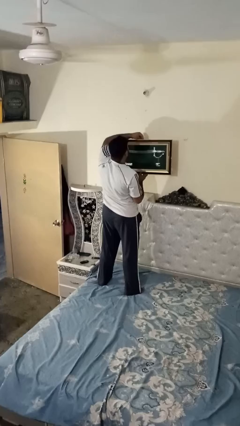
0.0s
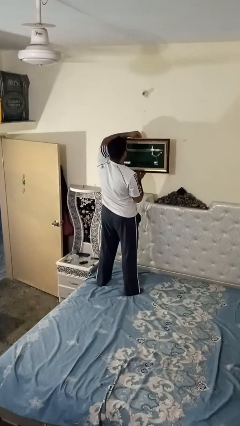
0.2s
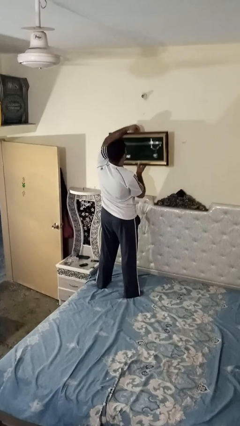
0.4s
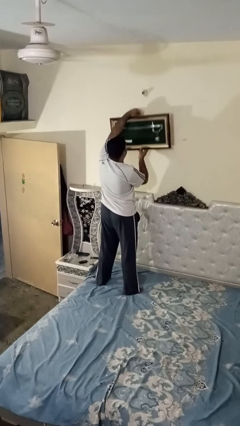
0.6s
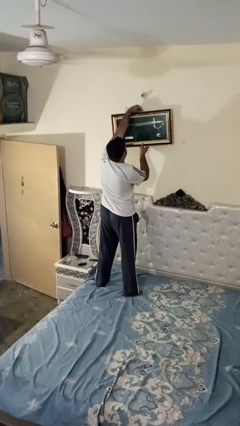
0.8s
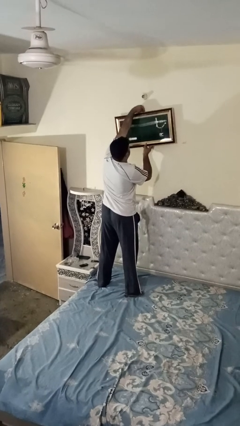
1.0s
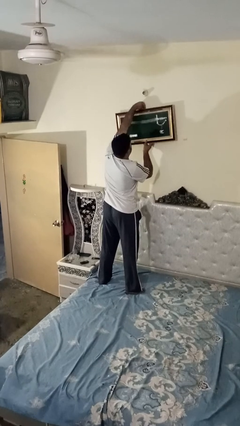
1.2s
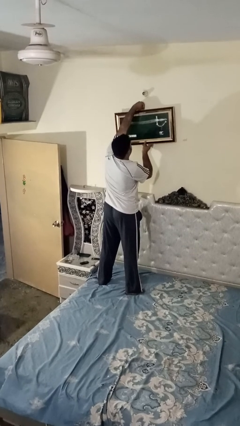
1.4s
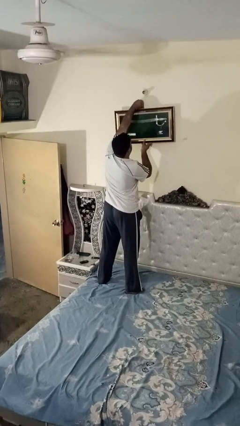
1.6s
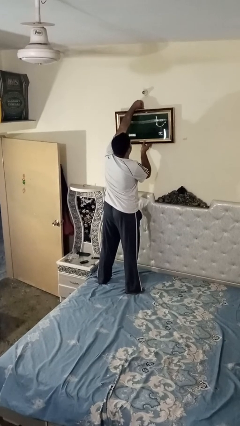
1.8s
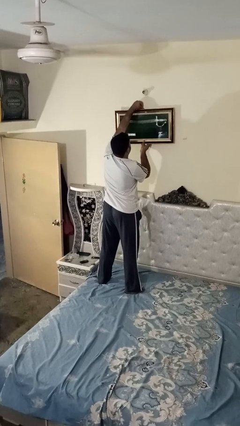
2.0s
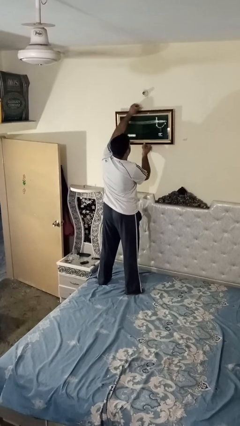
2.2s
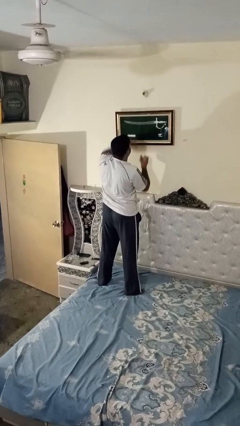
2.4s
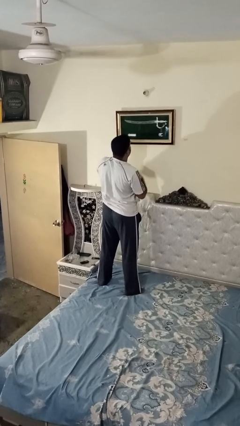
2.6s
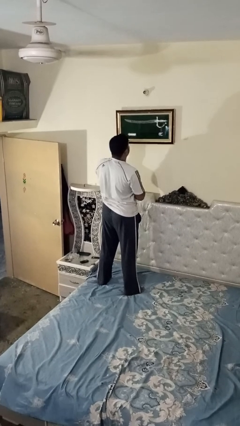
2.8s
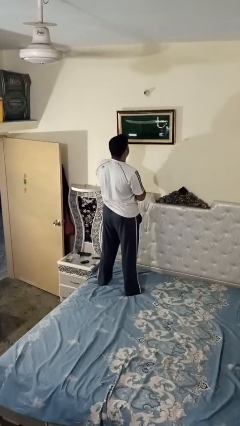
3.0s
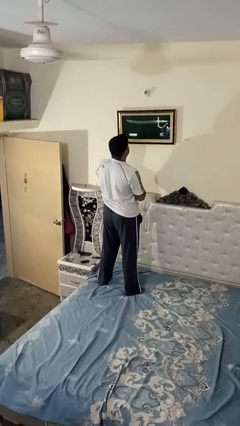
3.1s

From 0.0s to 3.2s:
person puts up picture frame

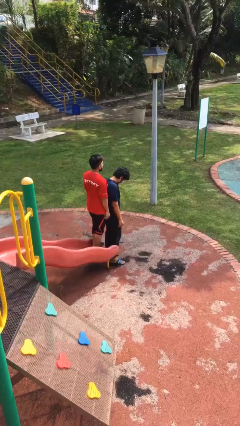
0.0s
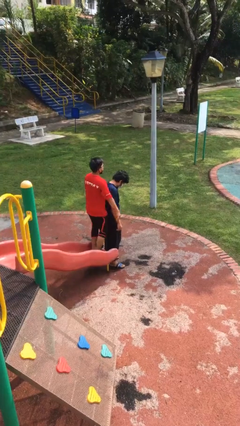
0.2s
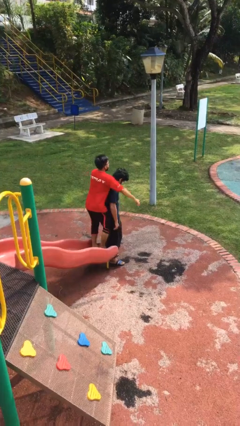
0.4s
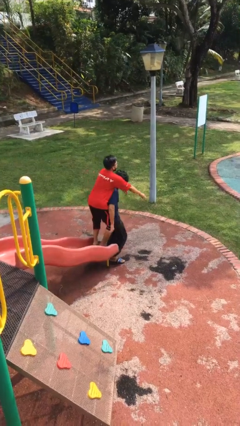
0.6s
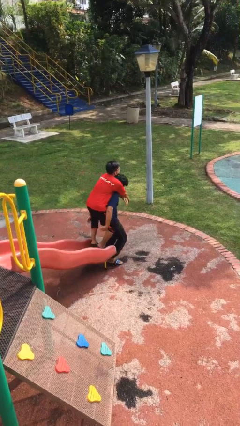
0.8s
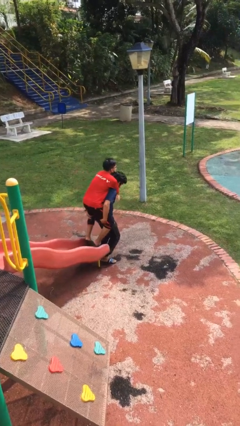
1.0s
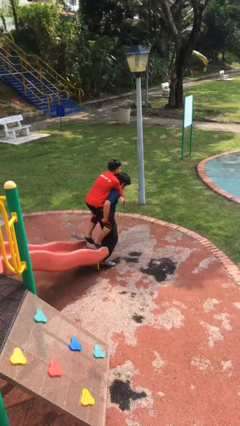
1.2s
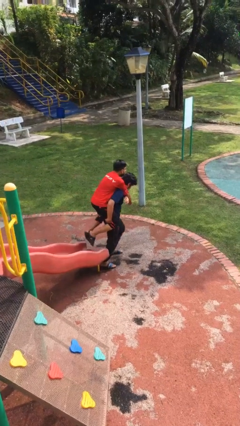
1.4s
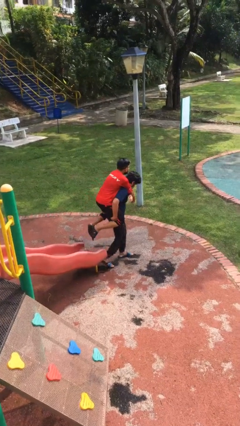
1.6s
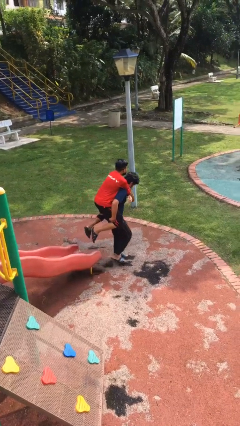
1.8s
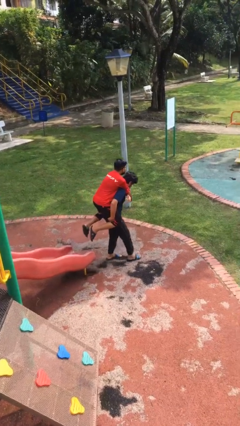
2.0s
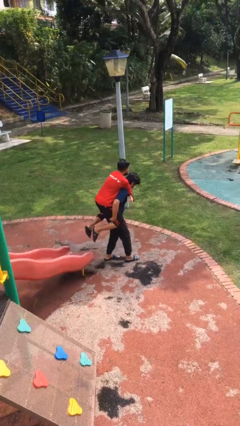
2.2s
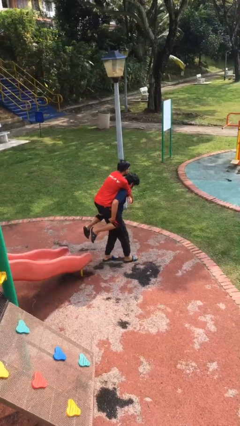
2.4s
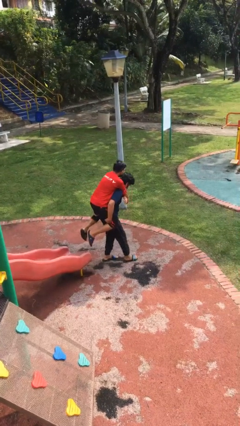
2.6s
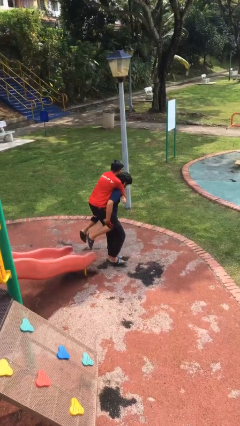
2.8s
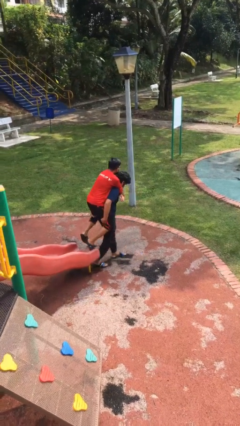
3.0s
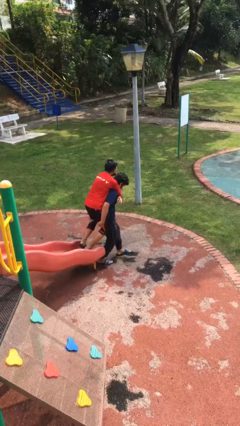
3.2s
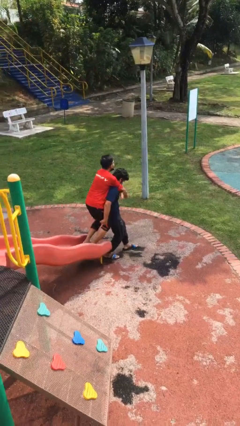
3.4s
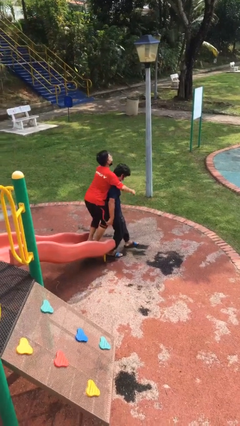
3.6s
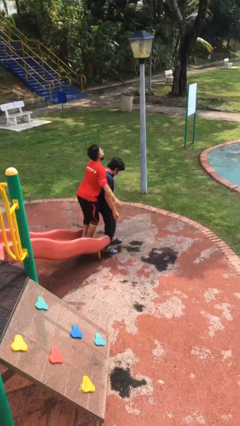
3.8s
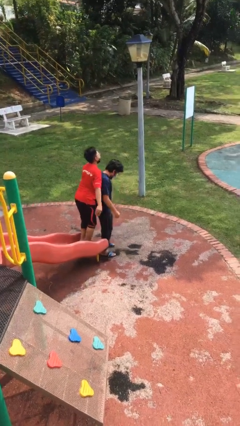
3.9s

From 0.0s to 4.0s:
person carries person on back

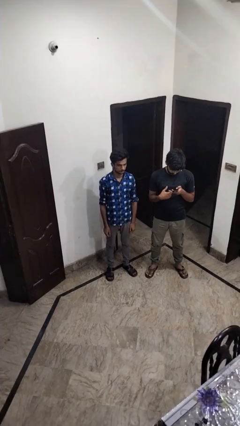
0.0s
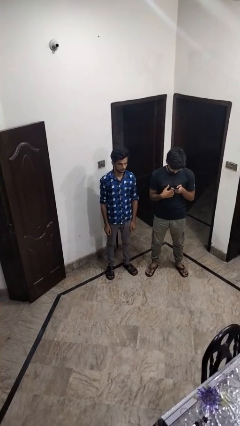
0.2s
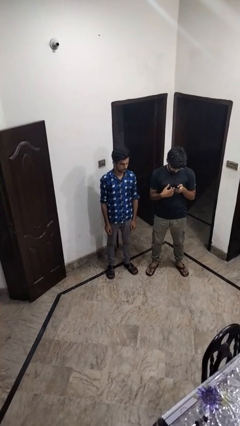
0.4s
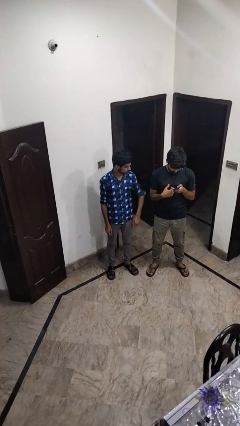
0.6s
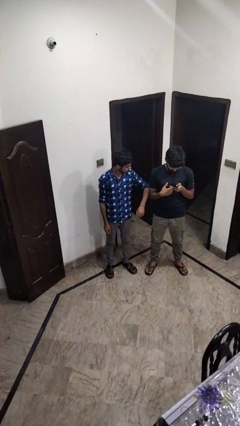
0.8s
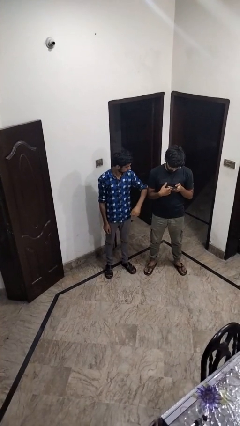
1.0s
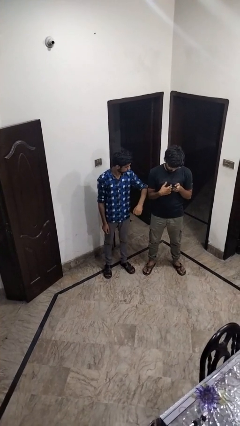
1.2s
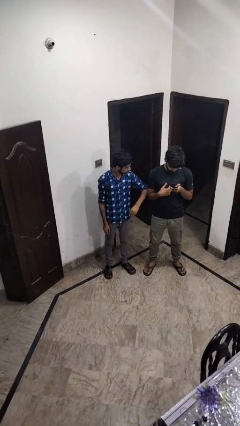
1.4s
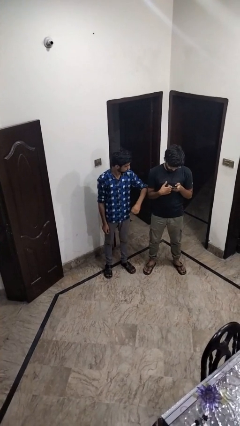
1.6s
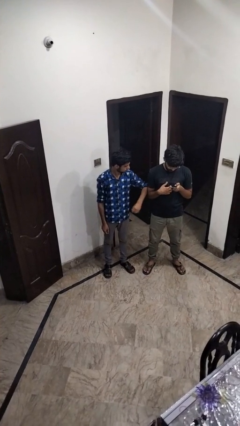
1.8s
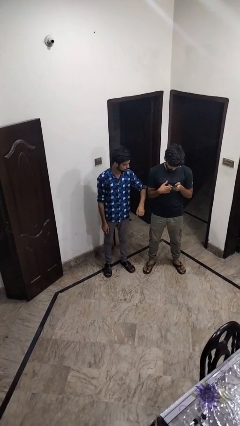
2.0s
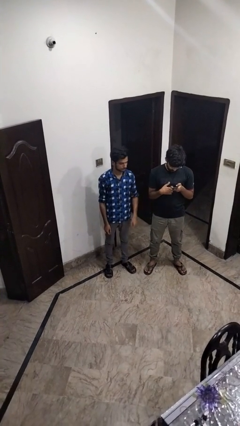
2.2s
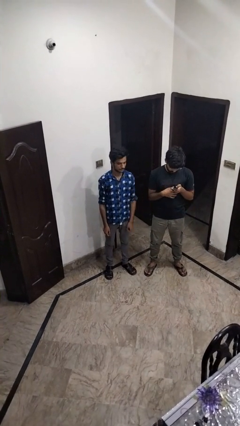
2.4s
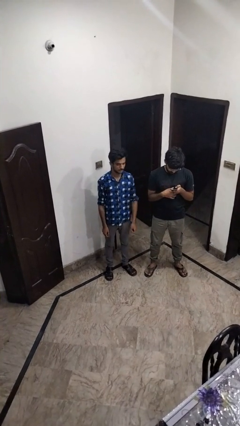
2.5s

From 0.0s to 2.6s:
person nudges person with elbow

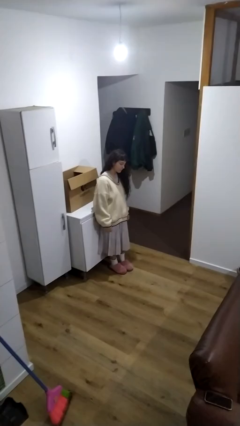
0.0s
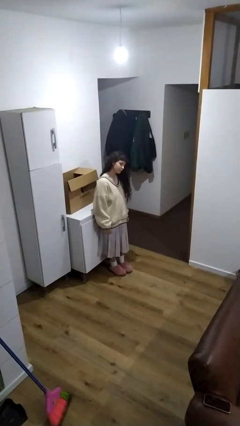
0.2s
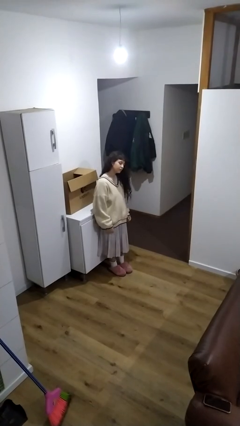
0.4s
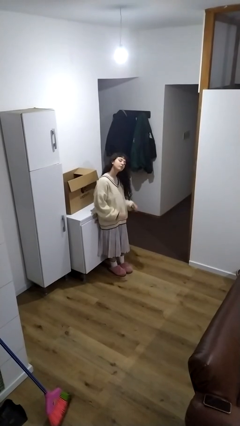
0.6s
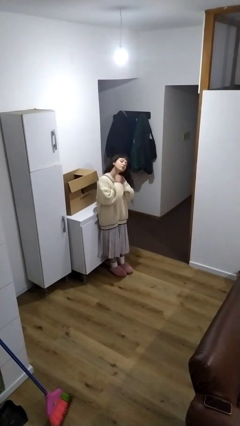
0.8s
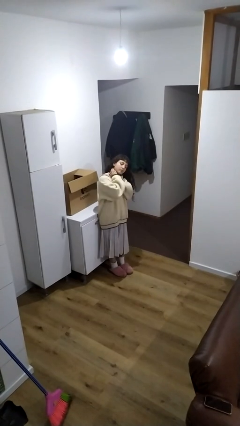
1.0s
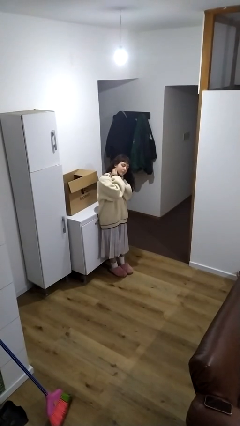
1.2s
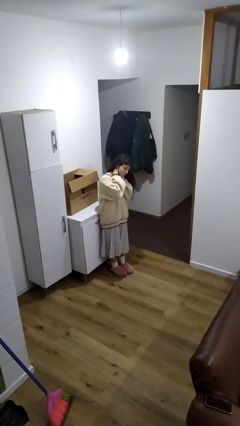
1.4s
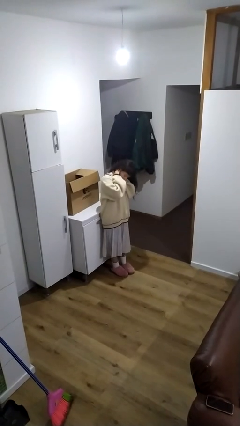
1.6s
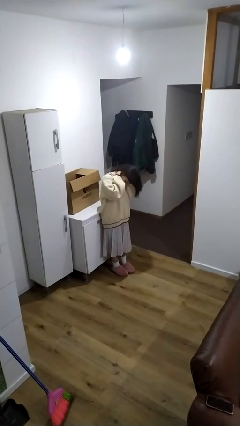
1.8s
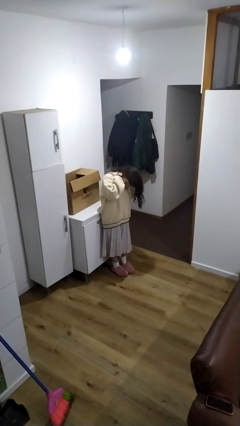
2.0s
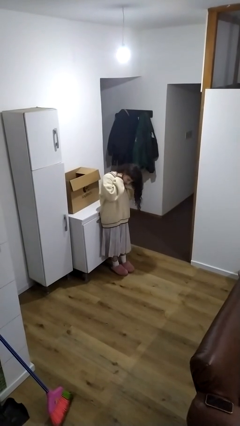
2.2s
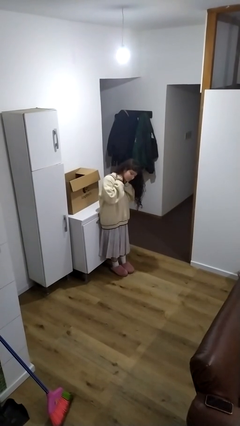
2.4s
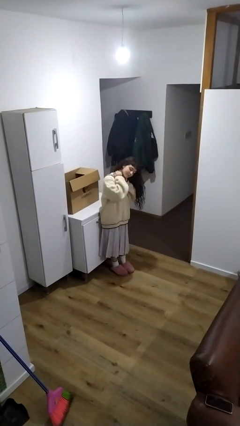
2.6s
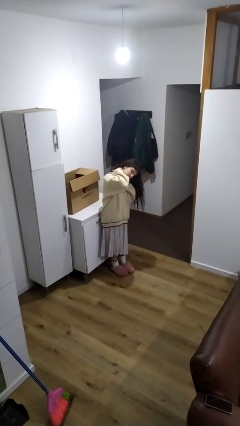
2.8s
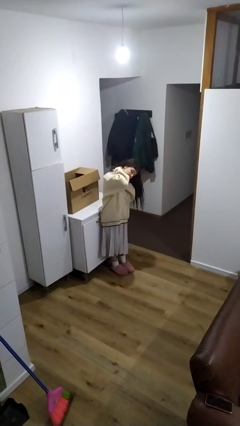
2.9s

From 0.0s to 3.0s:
person rubs neck

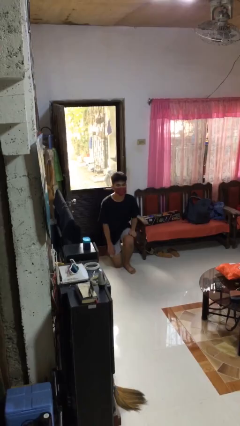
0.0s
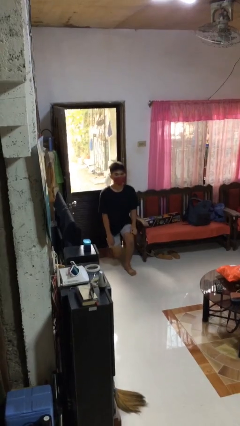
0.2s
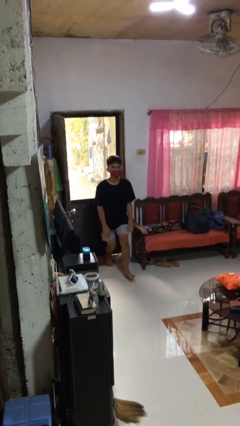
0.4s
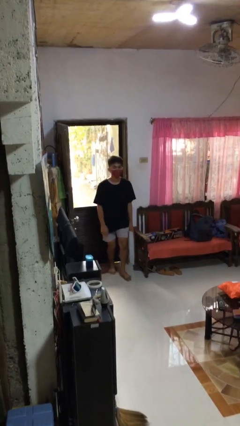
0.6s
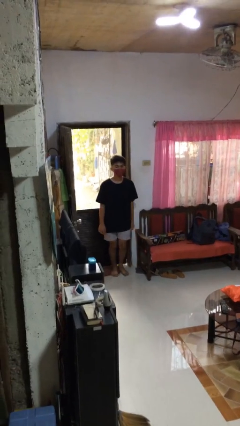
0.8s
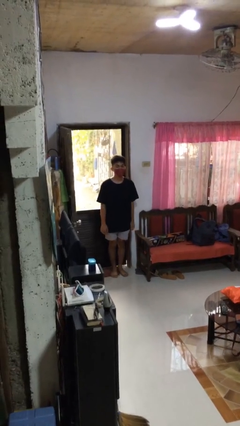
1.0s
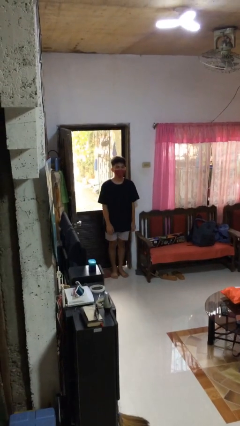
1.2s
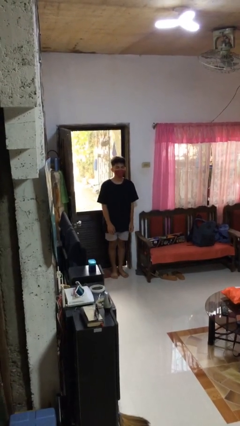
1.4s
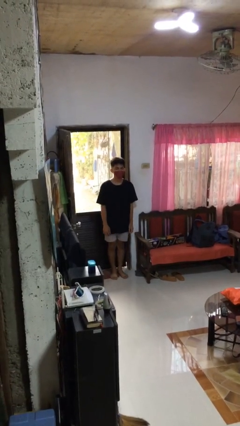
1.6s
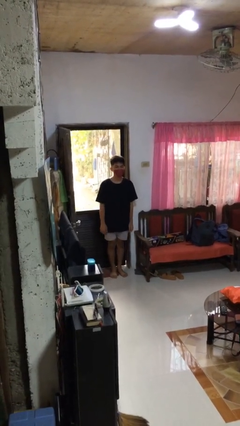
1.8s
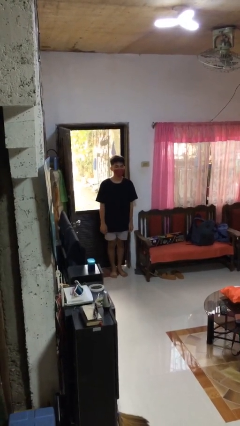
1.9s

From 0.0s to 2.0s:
person stands up from floor

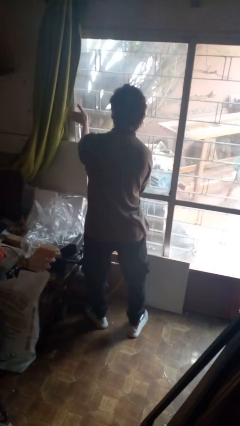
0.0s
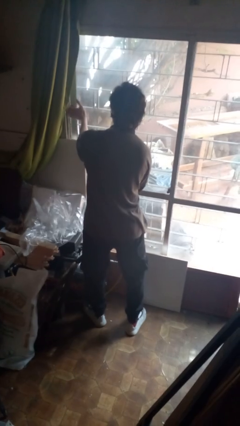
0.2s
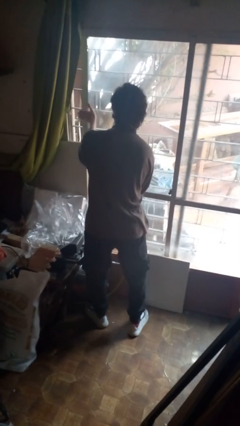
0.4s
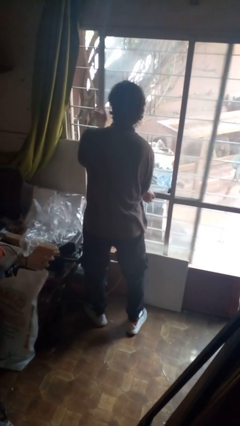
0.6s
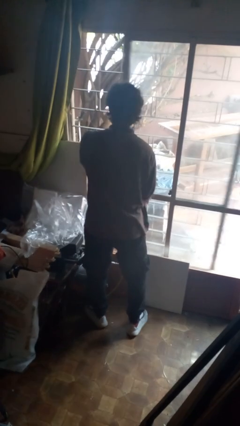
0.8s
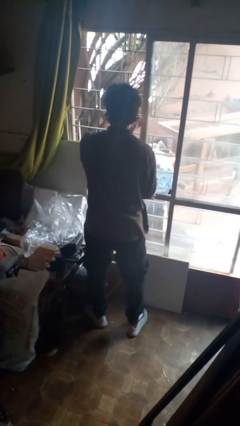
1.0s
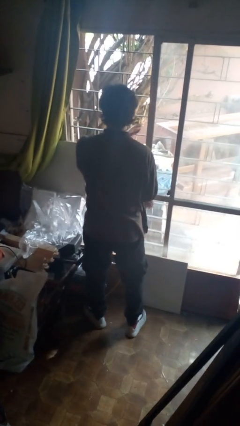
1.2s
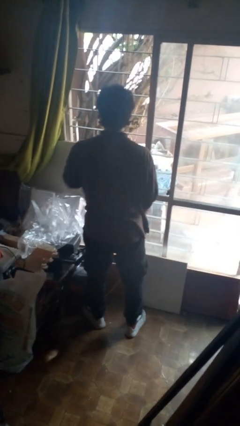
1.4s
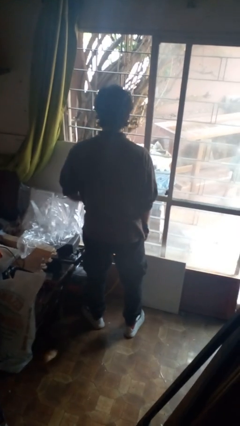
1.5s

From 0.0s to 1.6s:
person opens sliding door

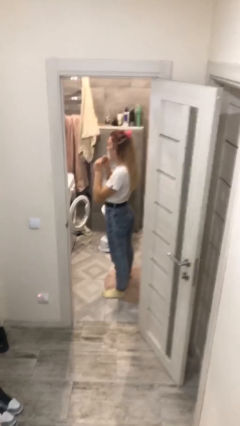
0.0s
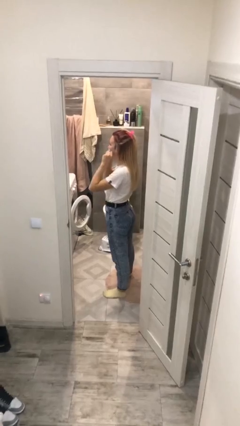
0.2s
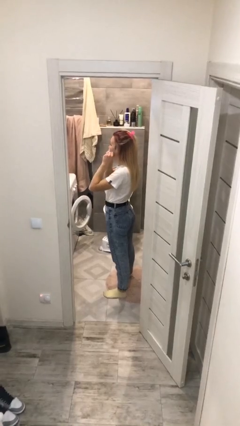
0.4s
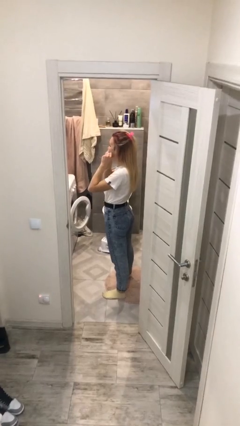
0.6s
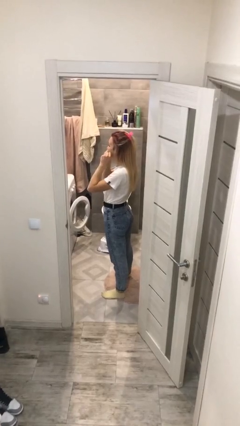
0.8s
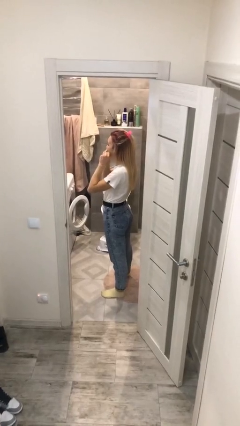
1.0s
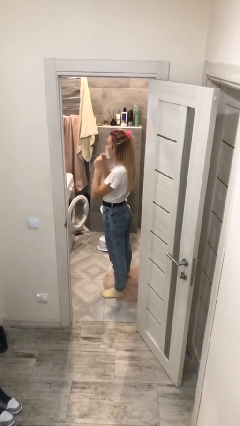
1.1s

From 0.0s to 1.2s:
person flosses
